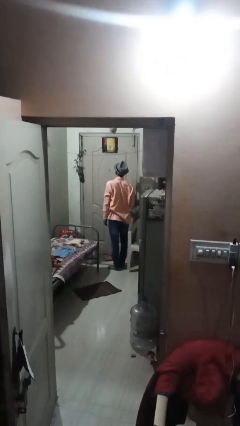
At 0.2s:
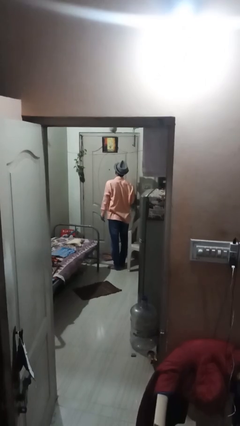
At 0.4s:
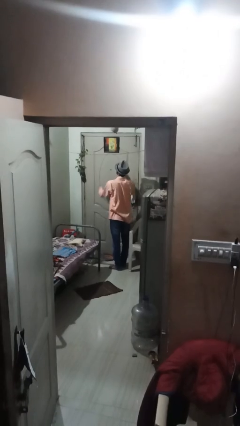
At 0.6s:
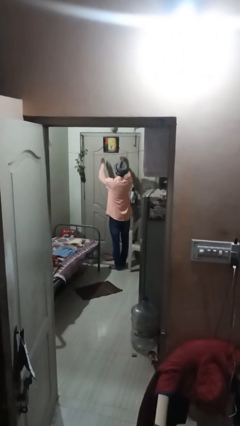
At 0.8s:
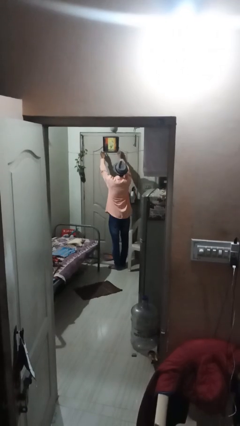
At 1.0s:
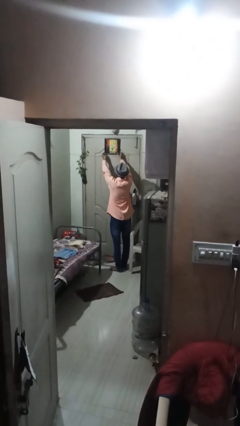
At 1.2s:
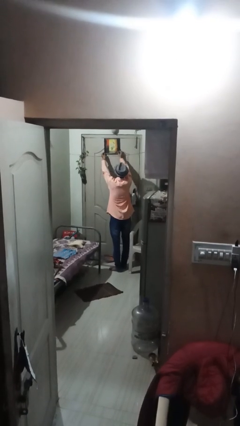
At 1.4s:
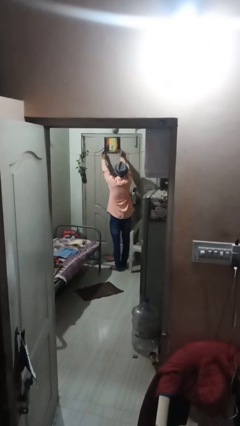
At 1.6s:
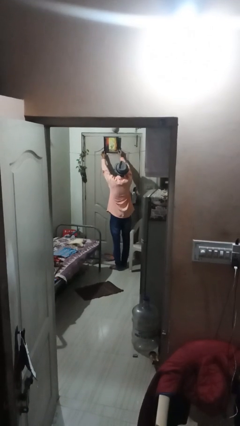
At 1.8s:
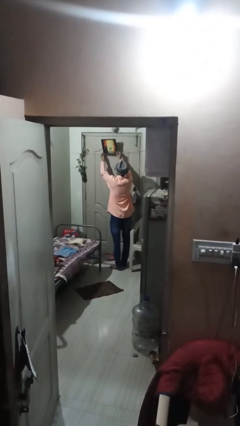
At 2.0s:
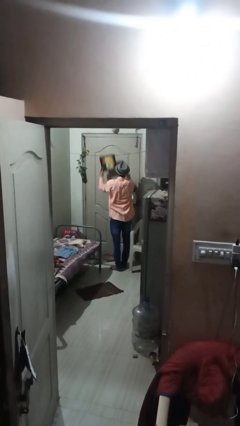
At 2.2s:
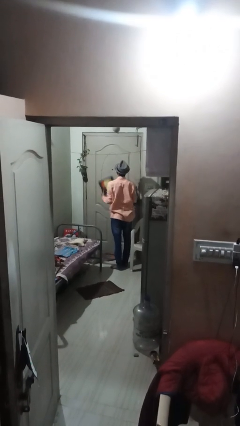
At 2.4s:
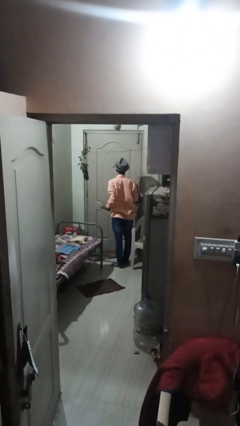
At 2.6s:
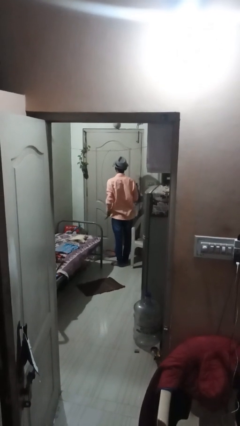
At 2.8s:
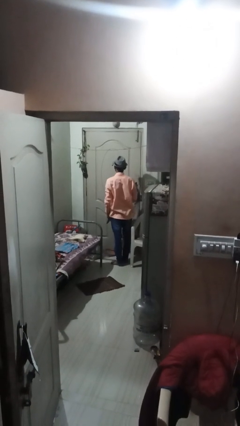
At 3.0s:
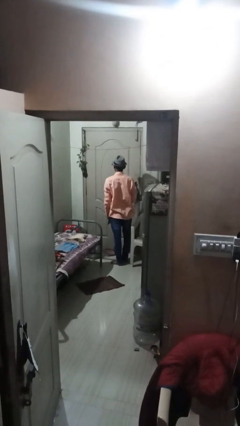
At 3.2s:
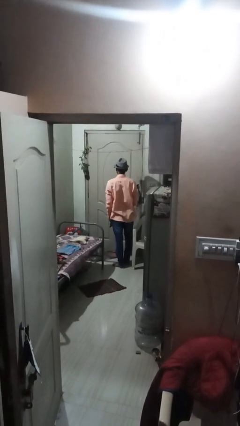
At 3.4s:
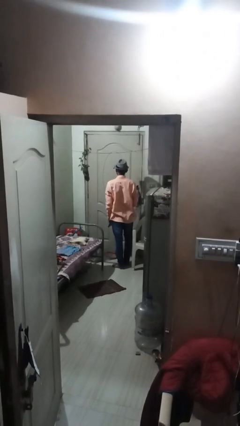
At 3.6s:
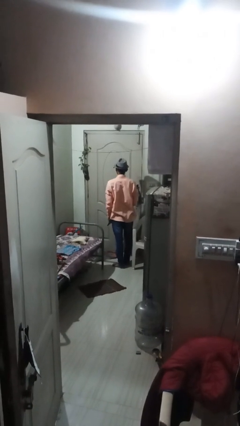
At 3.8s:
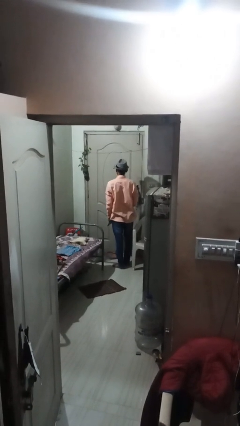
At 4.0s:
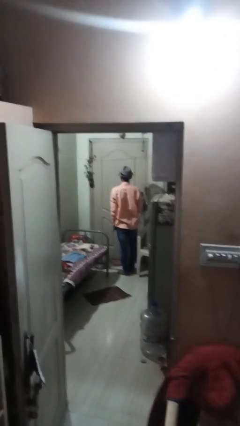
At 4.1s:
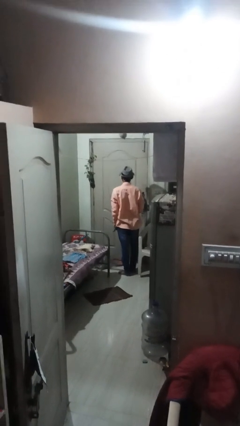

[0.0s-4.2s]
person takes down picture frame

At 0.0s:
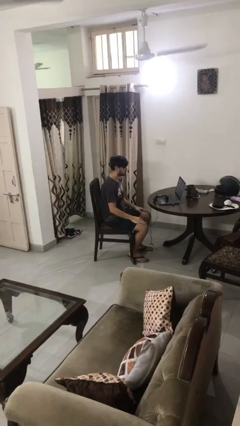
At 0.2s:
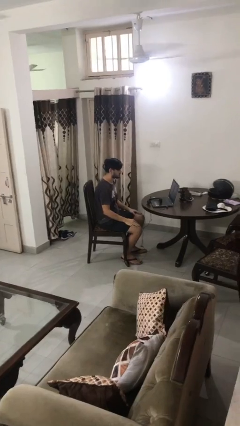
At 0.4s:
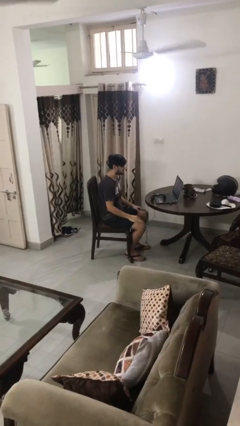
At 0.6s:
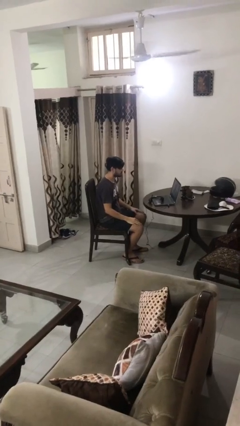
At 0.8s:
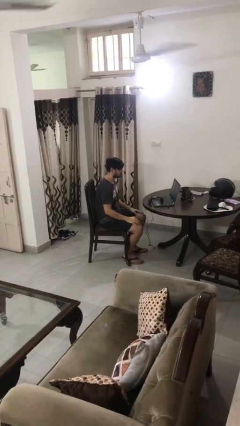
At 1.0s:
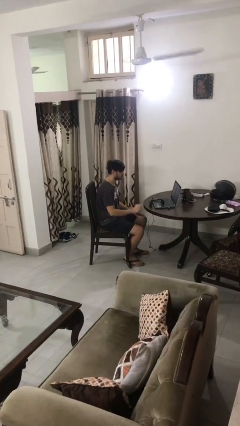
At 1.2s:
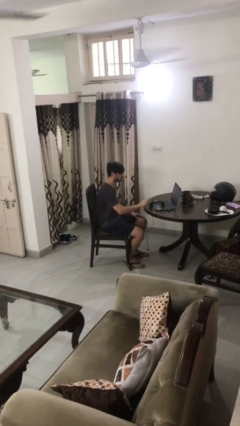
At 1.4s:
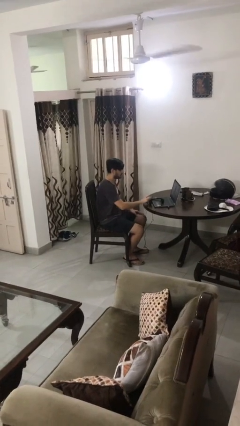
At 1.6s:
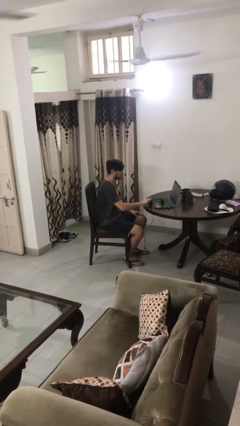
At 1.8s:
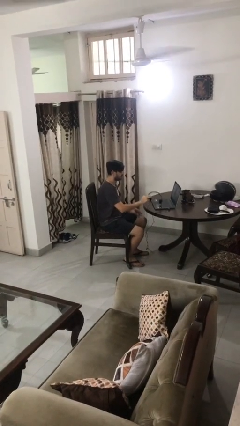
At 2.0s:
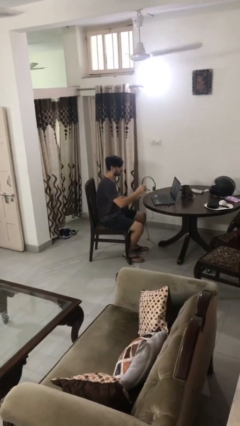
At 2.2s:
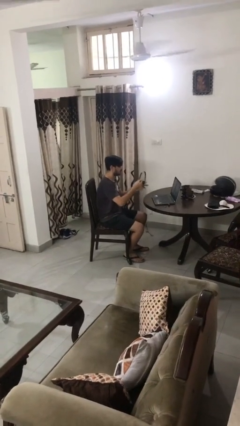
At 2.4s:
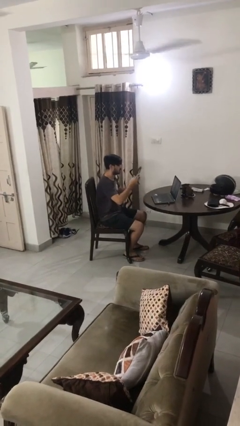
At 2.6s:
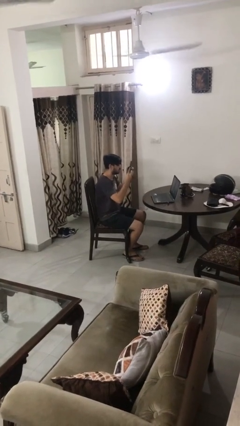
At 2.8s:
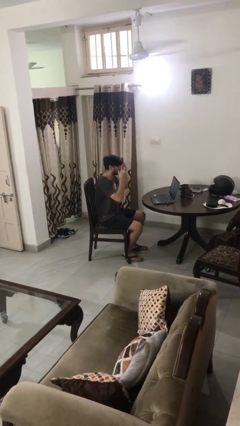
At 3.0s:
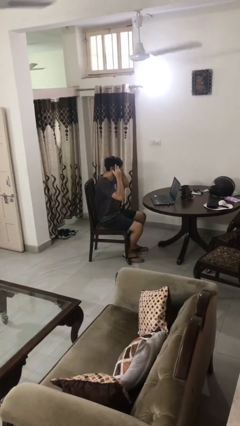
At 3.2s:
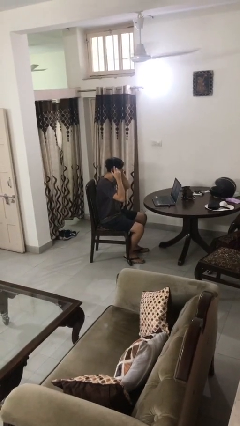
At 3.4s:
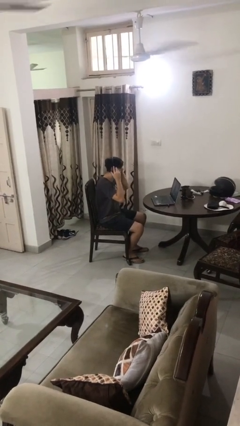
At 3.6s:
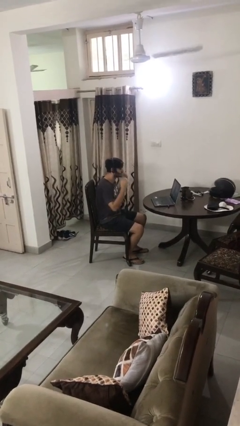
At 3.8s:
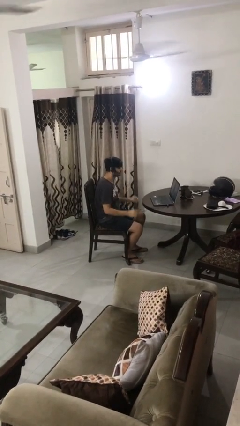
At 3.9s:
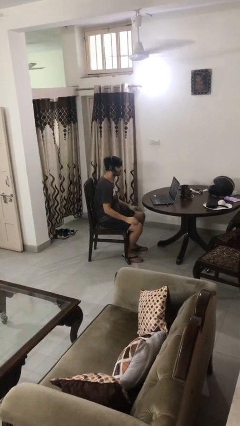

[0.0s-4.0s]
person puts on headphones

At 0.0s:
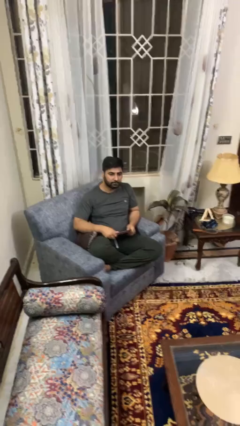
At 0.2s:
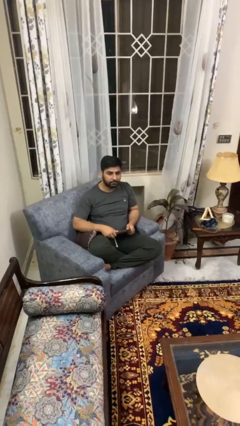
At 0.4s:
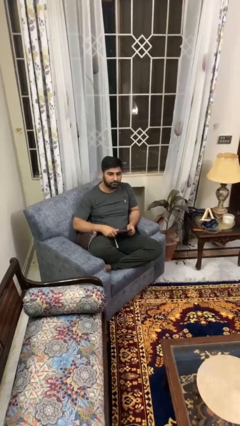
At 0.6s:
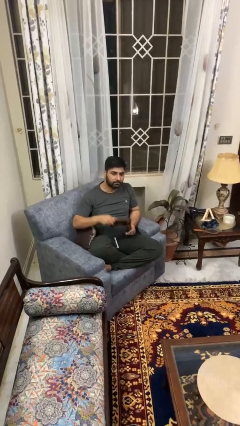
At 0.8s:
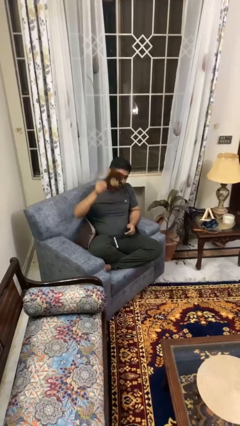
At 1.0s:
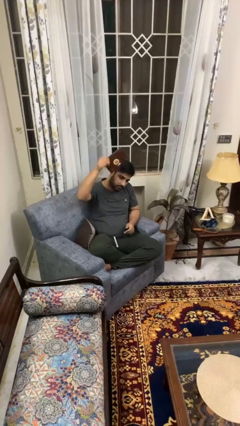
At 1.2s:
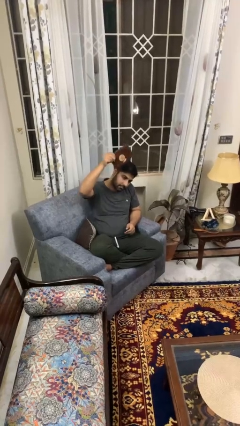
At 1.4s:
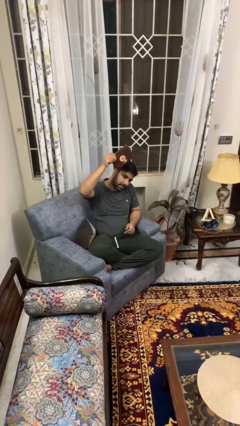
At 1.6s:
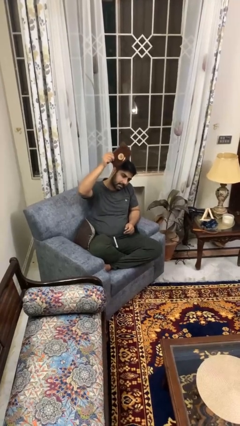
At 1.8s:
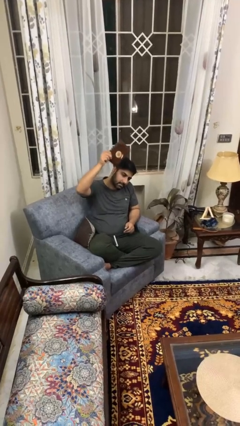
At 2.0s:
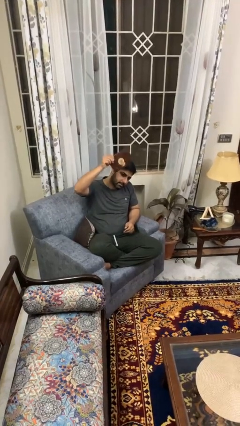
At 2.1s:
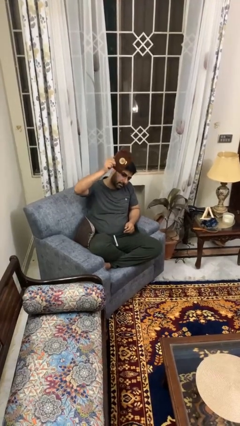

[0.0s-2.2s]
person holds object above head

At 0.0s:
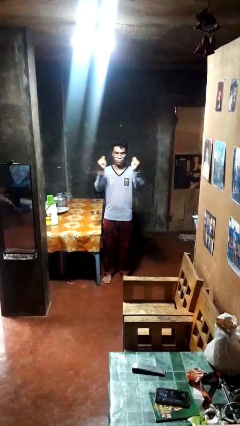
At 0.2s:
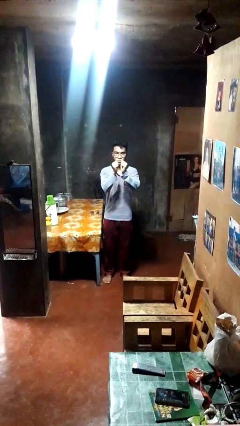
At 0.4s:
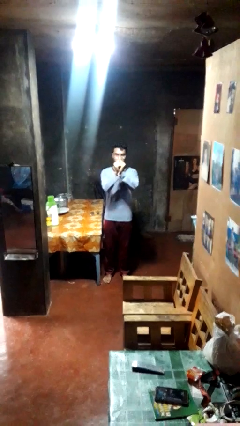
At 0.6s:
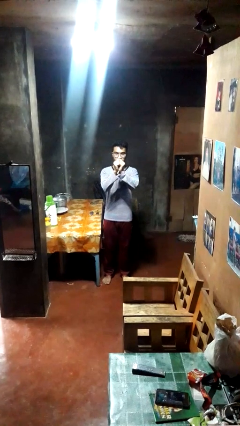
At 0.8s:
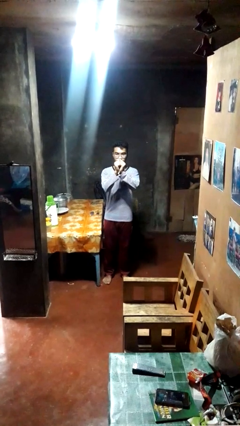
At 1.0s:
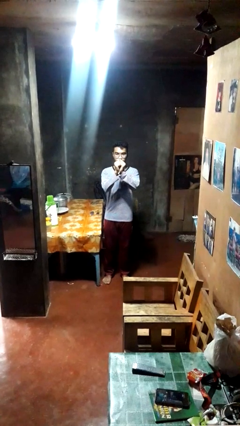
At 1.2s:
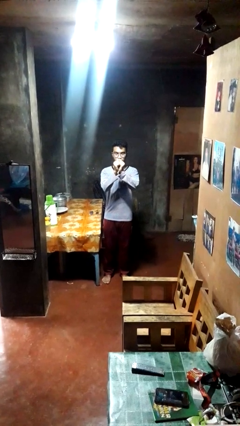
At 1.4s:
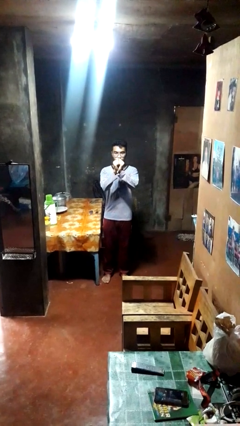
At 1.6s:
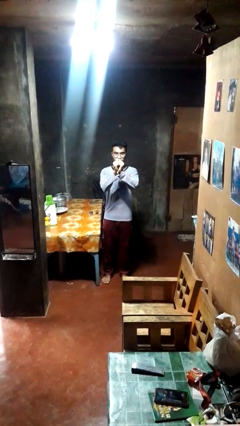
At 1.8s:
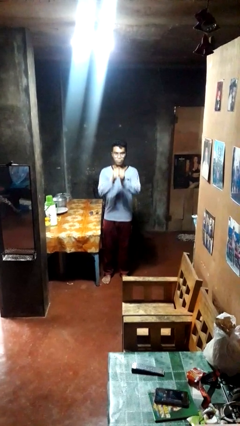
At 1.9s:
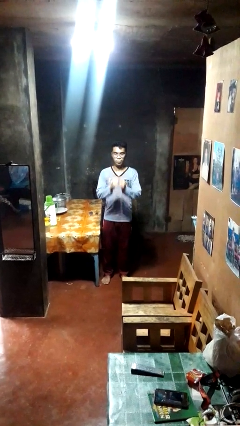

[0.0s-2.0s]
person gestures zoom out

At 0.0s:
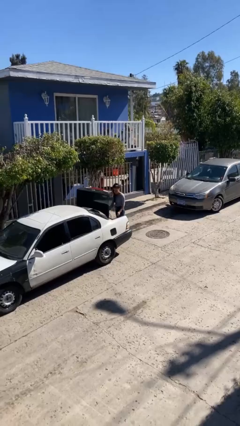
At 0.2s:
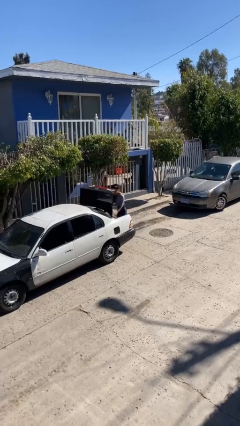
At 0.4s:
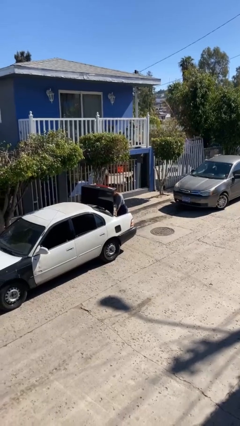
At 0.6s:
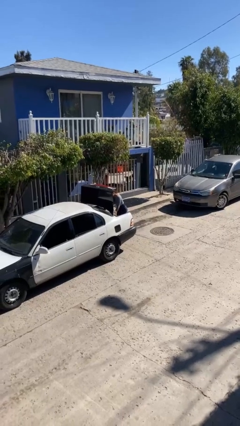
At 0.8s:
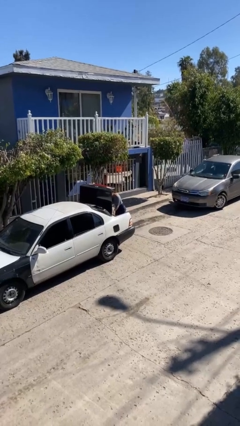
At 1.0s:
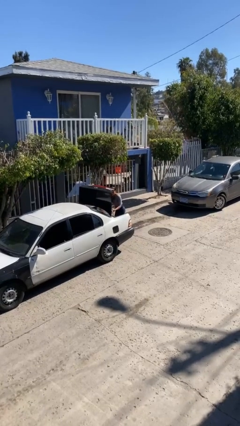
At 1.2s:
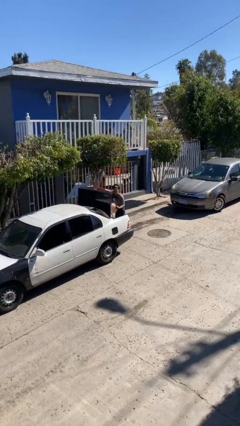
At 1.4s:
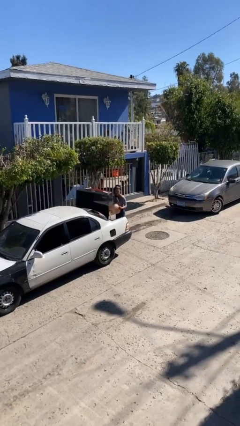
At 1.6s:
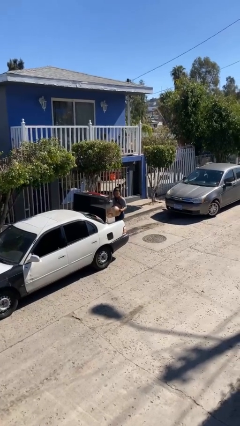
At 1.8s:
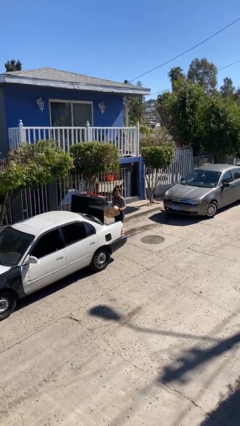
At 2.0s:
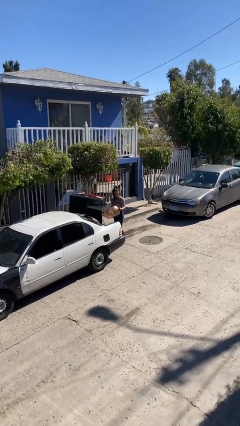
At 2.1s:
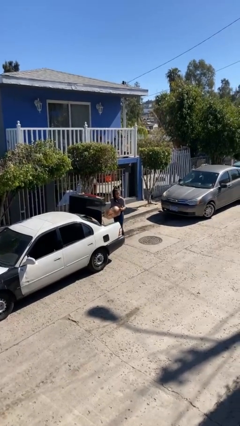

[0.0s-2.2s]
person unloads car

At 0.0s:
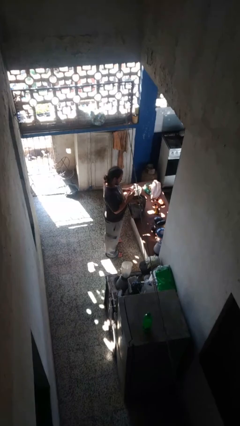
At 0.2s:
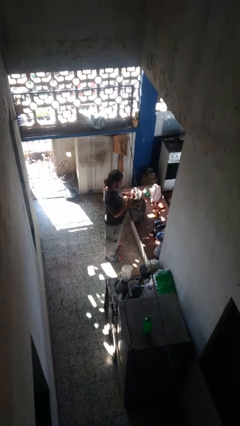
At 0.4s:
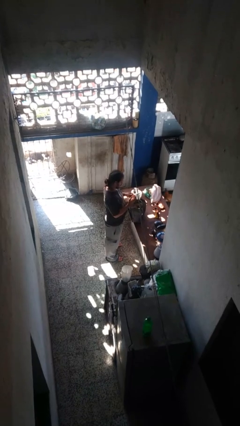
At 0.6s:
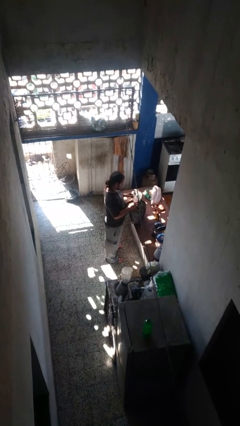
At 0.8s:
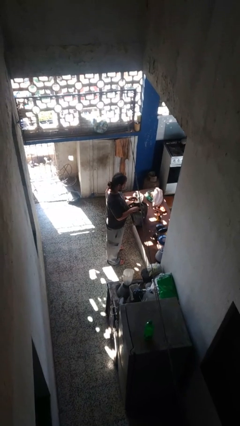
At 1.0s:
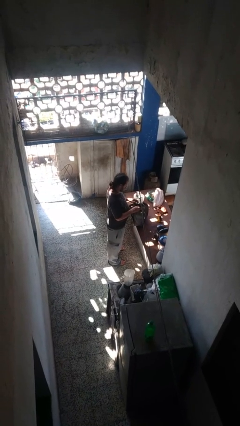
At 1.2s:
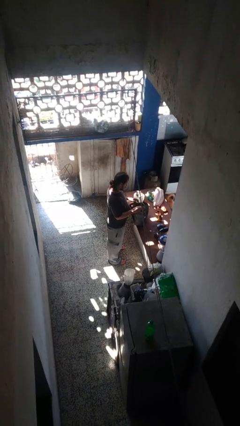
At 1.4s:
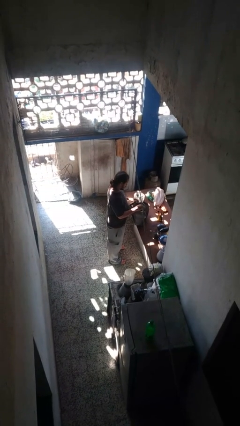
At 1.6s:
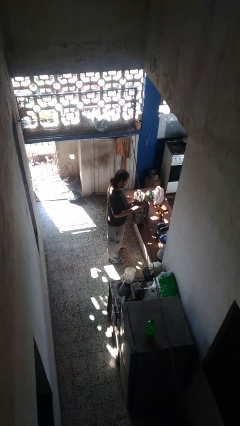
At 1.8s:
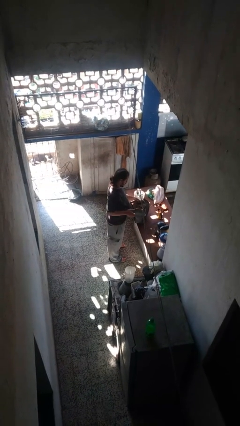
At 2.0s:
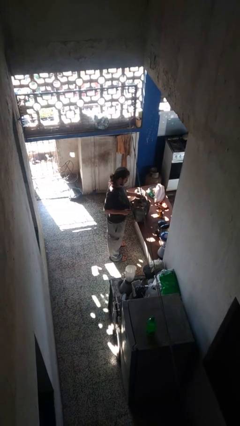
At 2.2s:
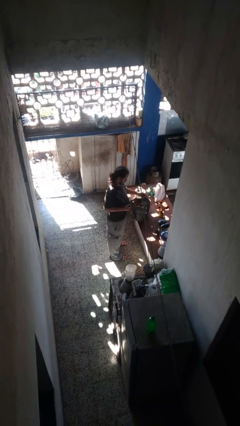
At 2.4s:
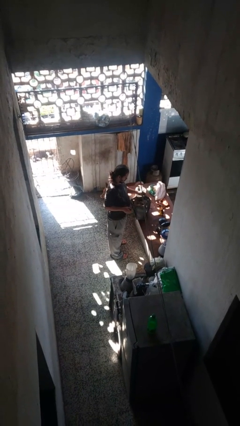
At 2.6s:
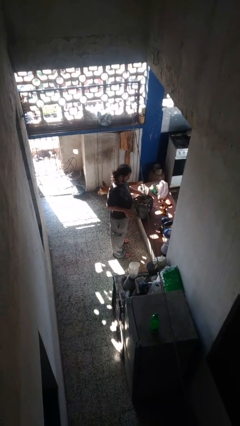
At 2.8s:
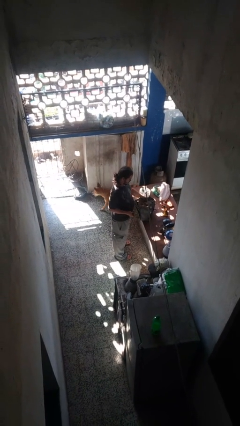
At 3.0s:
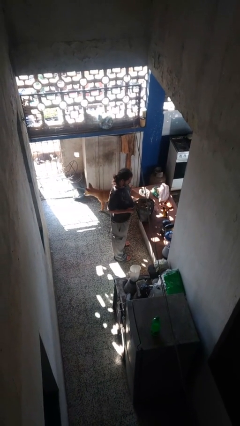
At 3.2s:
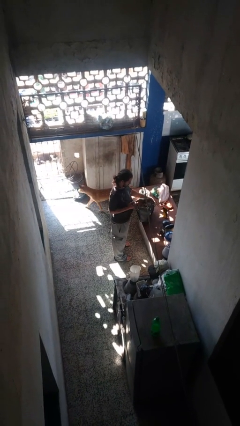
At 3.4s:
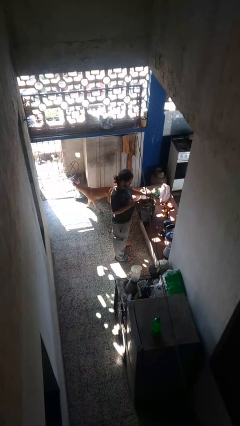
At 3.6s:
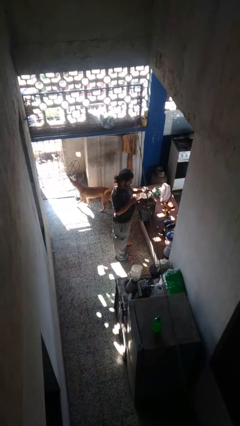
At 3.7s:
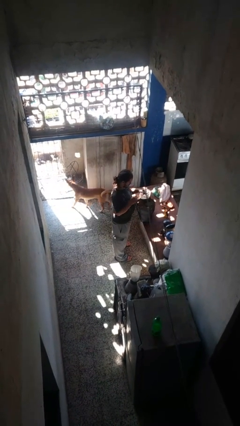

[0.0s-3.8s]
person puts object into purse
